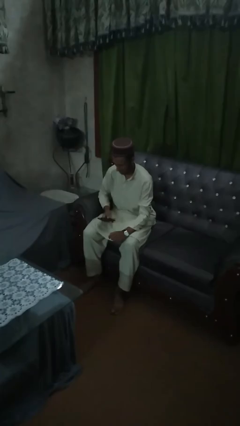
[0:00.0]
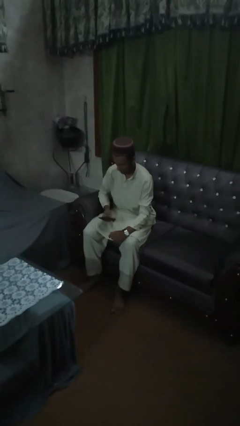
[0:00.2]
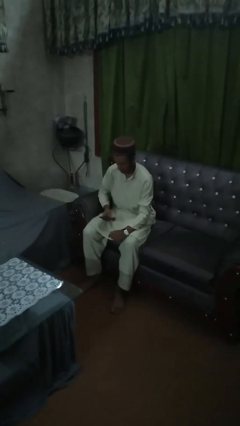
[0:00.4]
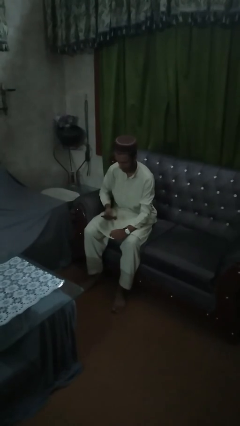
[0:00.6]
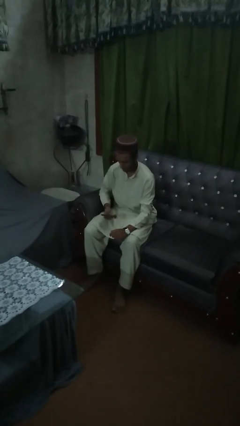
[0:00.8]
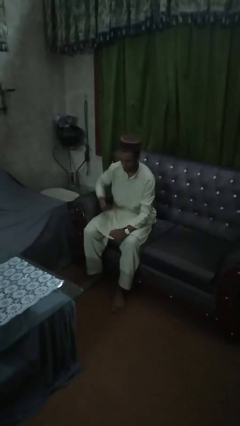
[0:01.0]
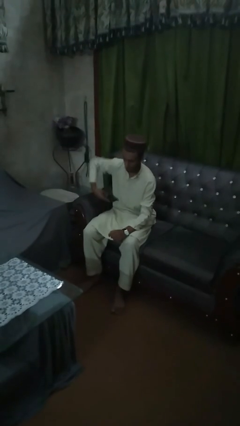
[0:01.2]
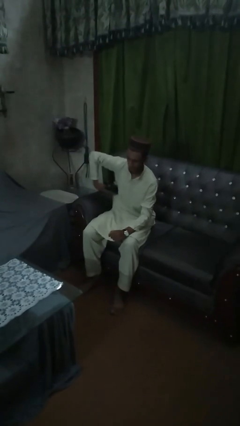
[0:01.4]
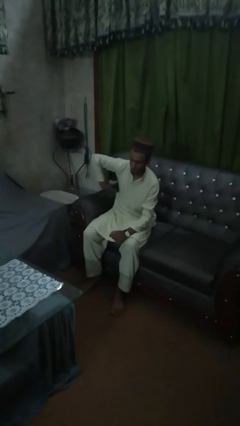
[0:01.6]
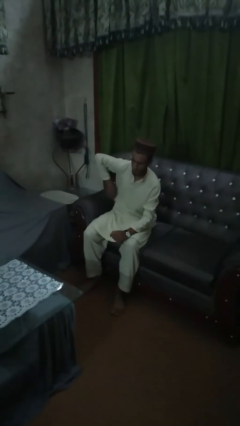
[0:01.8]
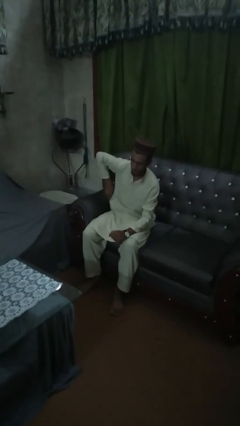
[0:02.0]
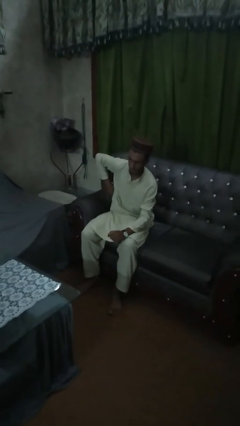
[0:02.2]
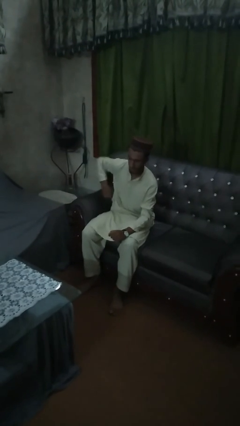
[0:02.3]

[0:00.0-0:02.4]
person puts phone into pocket

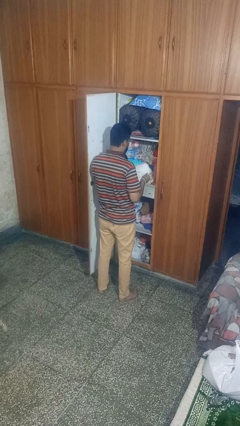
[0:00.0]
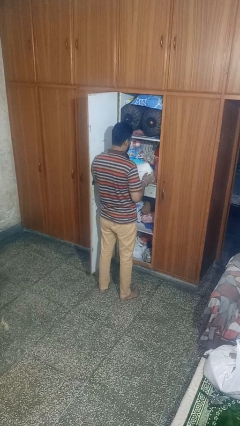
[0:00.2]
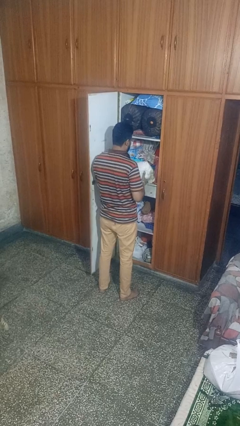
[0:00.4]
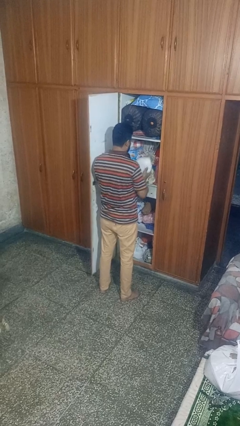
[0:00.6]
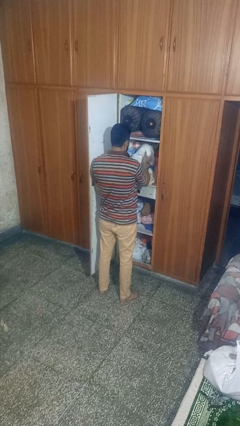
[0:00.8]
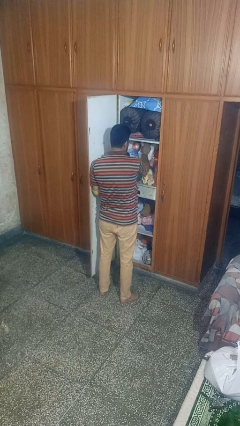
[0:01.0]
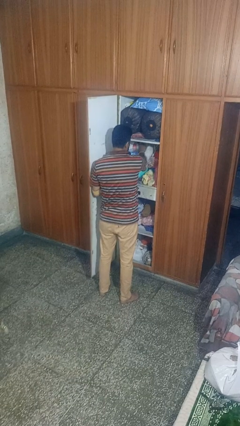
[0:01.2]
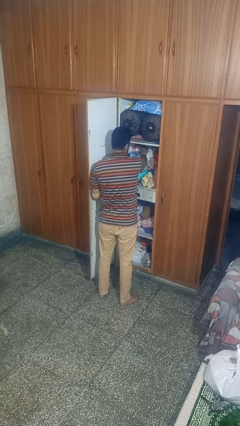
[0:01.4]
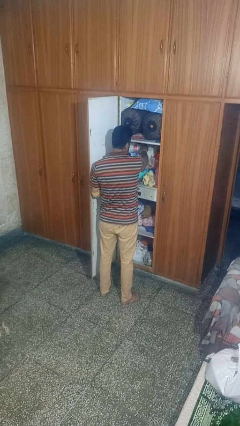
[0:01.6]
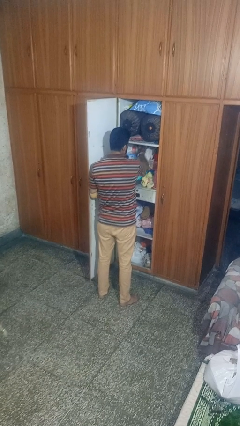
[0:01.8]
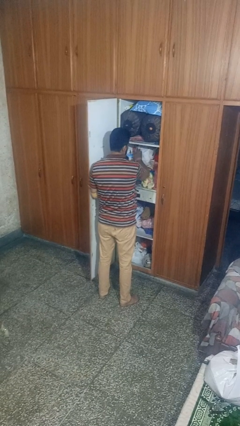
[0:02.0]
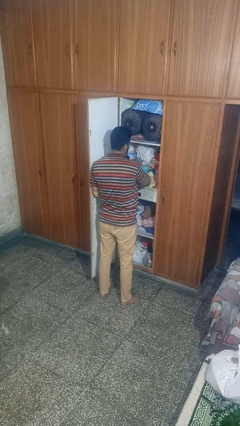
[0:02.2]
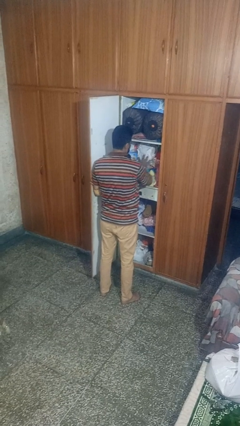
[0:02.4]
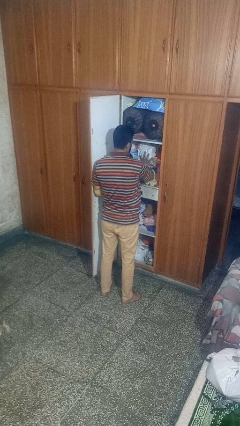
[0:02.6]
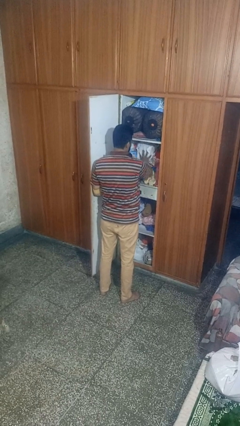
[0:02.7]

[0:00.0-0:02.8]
person puts down object into cabinet

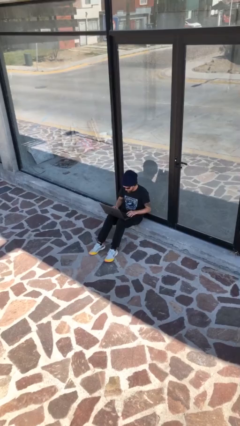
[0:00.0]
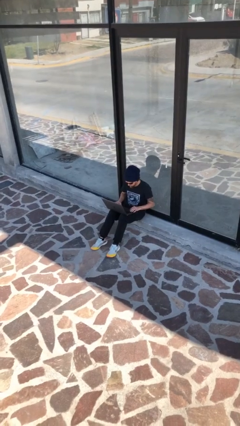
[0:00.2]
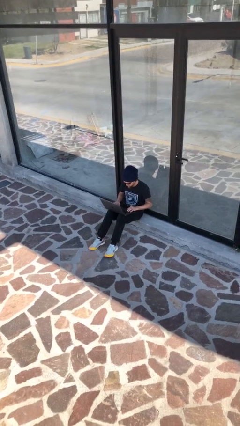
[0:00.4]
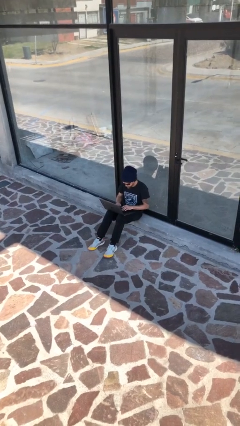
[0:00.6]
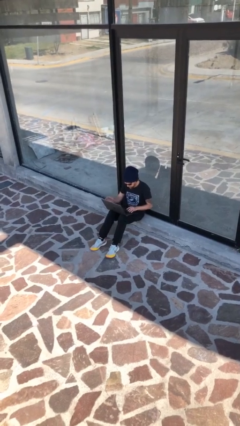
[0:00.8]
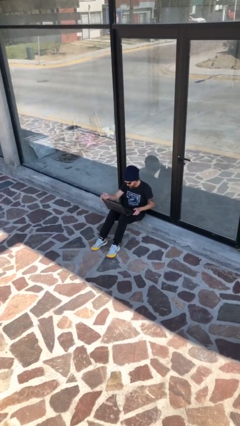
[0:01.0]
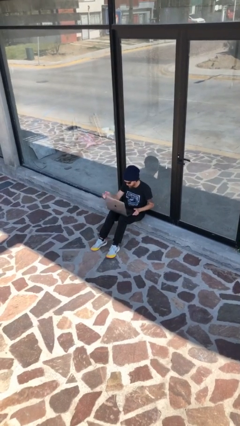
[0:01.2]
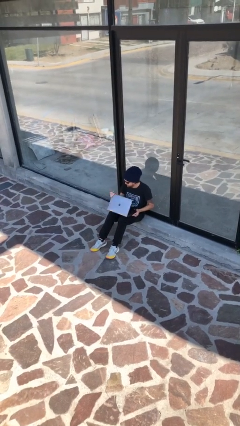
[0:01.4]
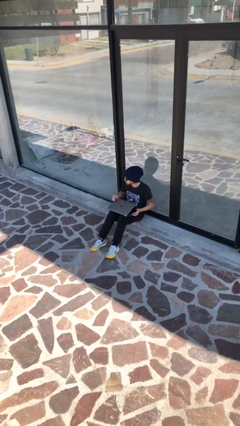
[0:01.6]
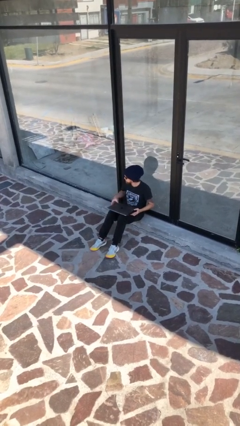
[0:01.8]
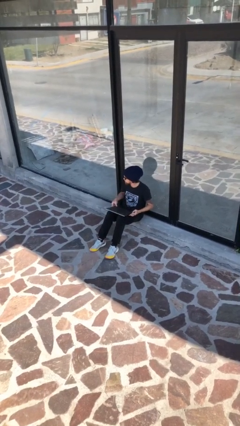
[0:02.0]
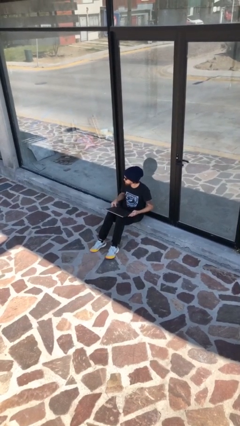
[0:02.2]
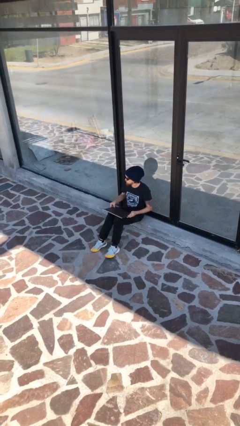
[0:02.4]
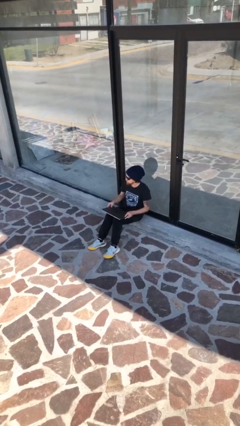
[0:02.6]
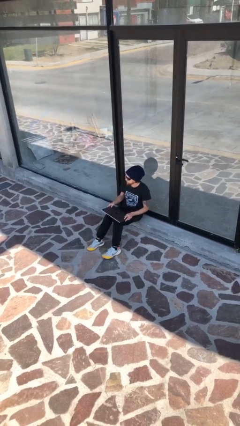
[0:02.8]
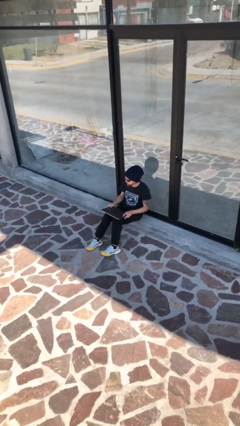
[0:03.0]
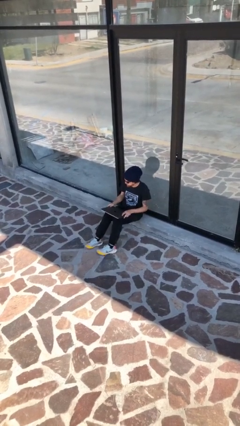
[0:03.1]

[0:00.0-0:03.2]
person interacts with laptop

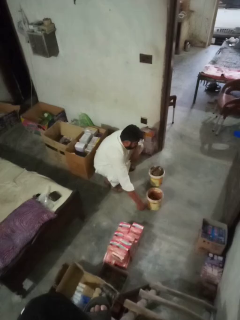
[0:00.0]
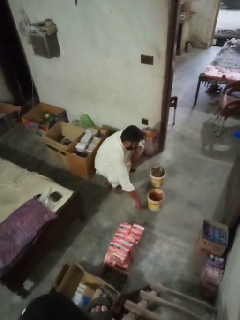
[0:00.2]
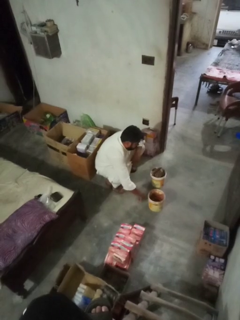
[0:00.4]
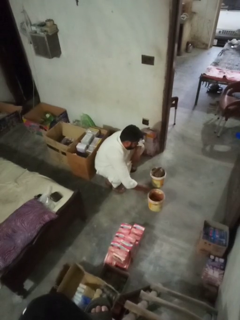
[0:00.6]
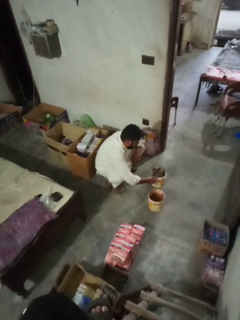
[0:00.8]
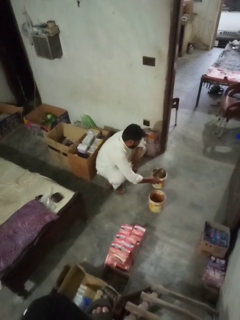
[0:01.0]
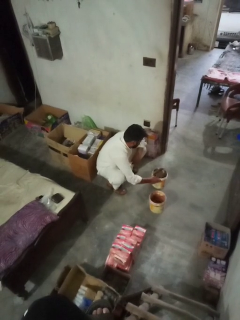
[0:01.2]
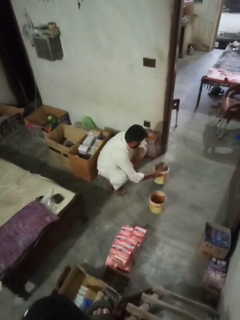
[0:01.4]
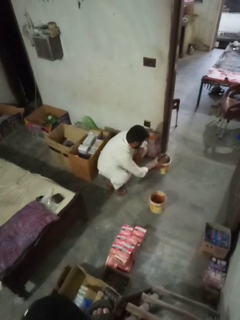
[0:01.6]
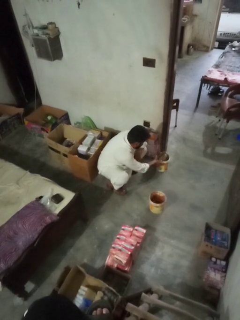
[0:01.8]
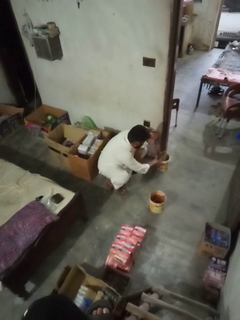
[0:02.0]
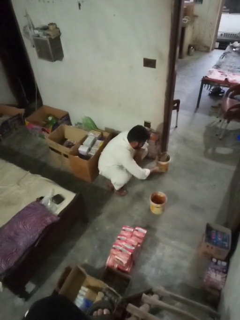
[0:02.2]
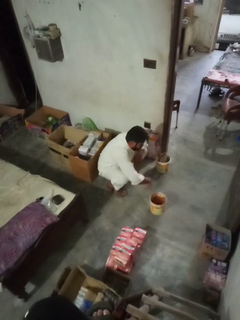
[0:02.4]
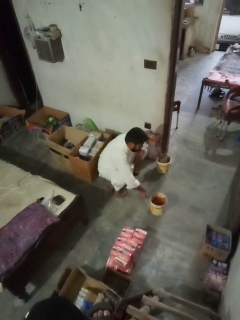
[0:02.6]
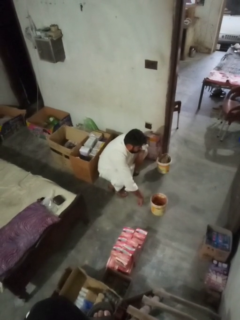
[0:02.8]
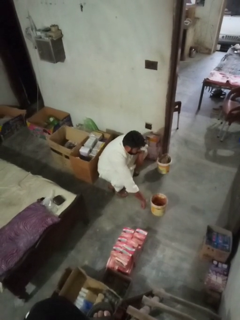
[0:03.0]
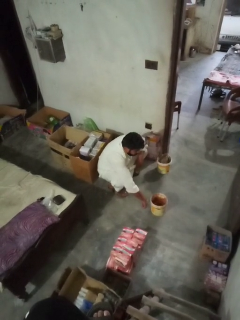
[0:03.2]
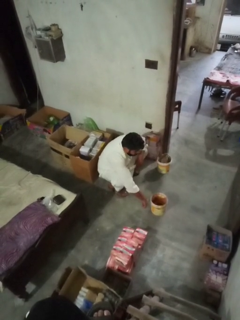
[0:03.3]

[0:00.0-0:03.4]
person inserts trashbag into trashcan

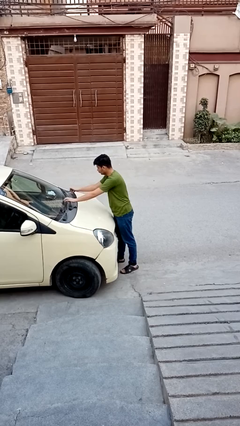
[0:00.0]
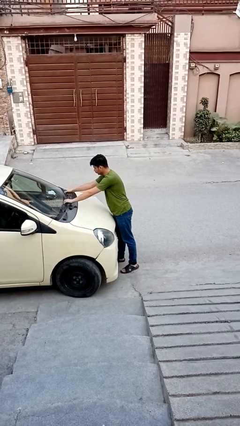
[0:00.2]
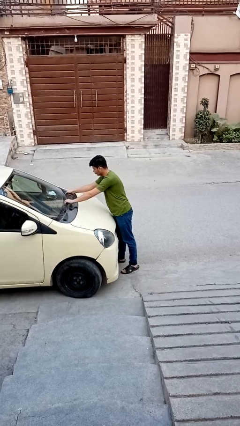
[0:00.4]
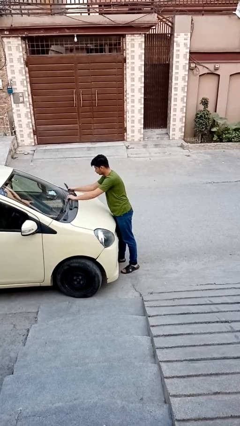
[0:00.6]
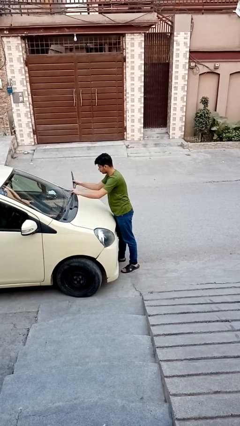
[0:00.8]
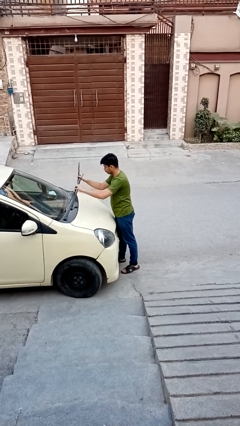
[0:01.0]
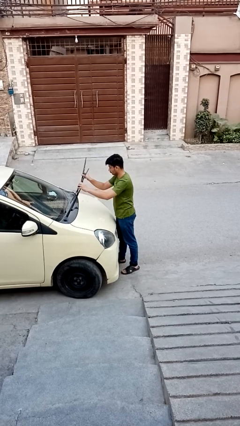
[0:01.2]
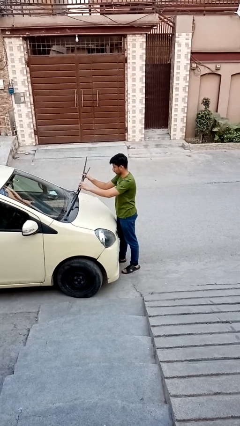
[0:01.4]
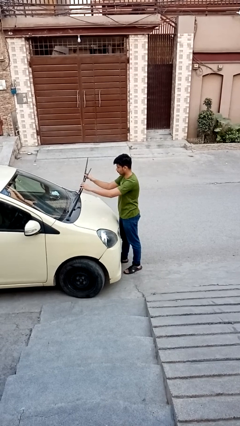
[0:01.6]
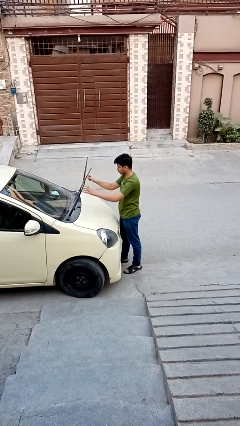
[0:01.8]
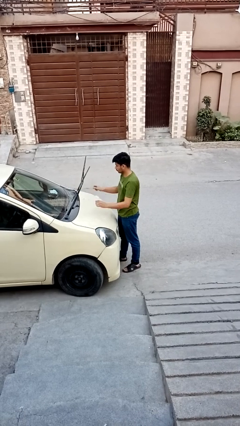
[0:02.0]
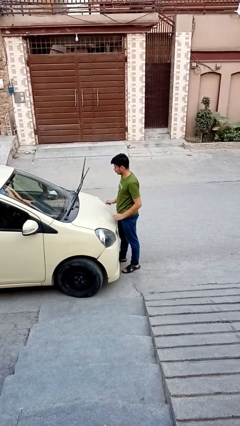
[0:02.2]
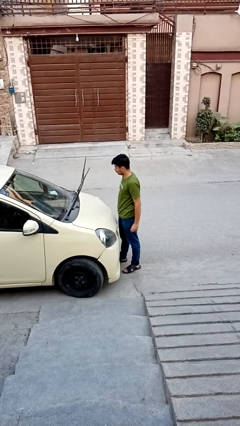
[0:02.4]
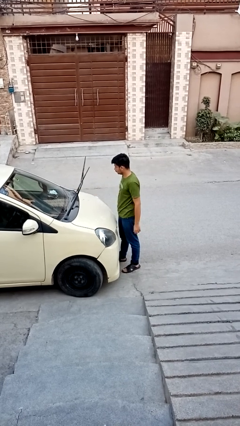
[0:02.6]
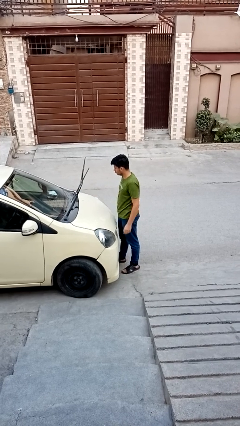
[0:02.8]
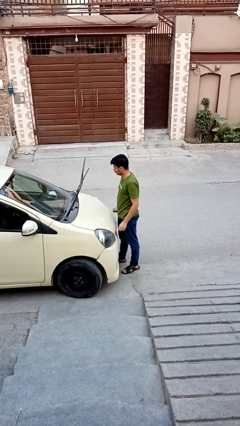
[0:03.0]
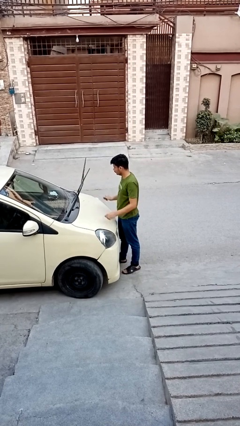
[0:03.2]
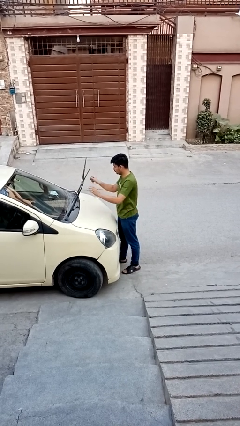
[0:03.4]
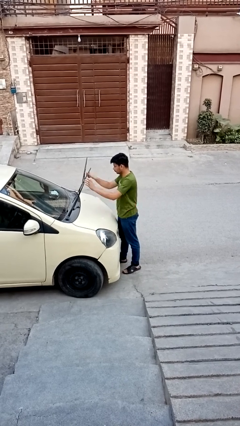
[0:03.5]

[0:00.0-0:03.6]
person flips up car wipers

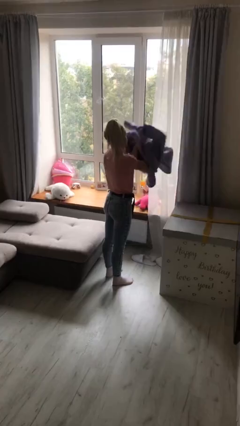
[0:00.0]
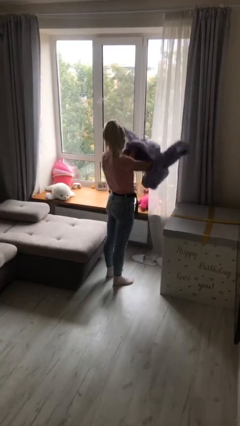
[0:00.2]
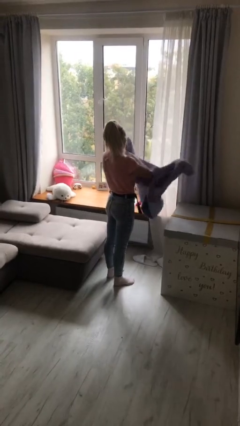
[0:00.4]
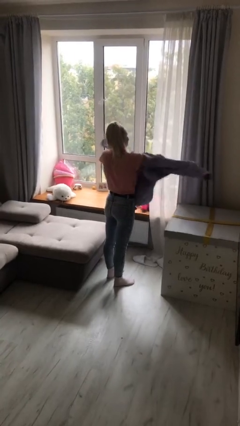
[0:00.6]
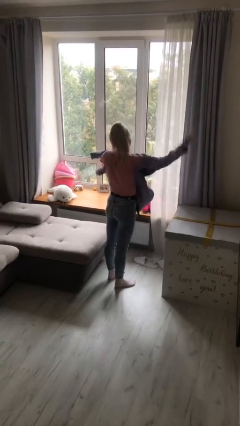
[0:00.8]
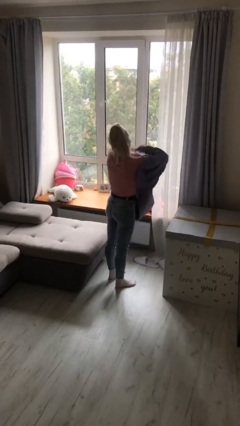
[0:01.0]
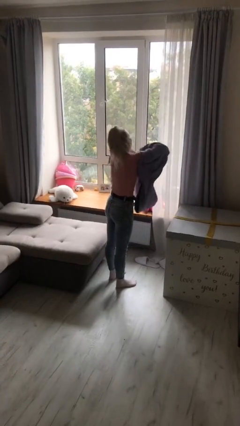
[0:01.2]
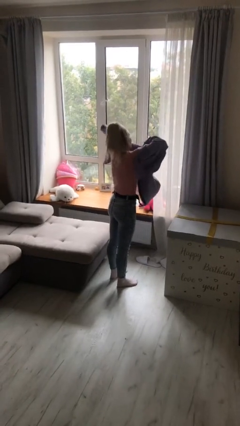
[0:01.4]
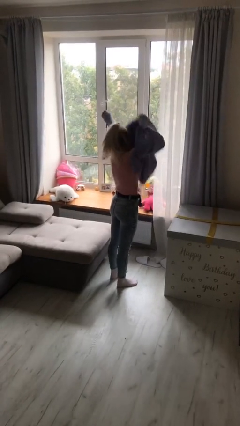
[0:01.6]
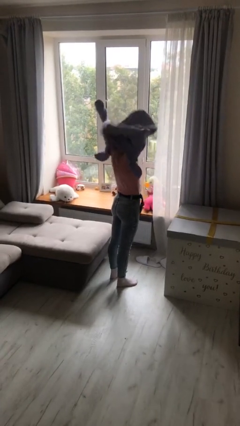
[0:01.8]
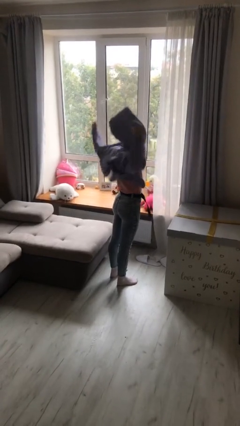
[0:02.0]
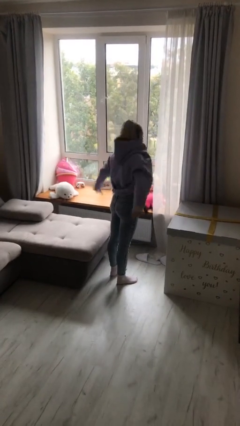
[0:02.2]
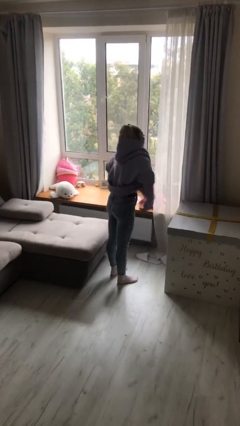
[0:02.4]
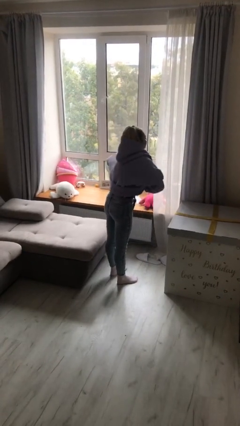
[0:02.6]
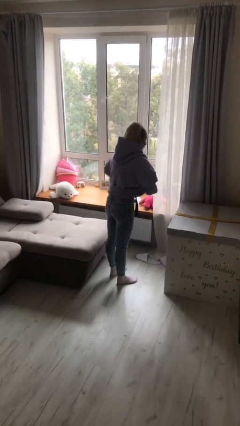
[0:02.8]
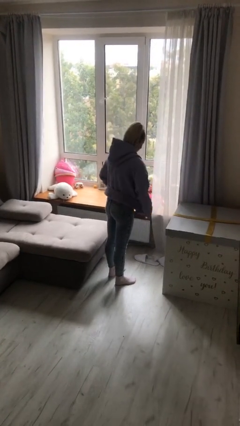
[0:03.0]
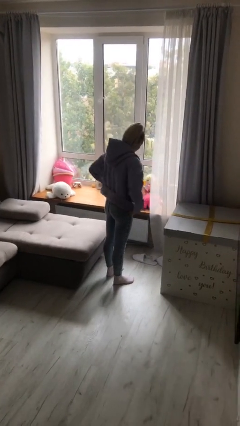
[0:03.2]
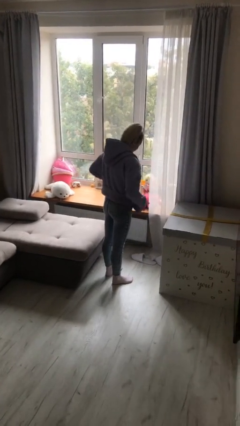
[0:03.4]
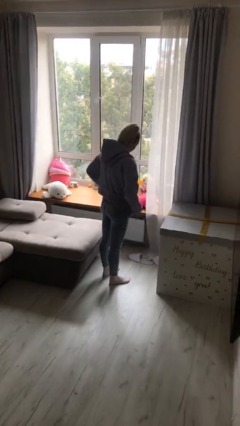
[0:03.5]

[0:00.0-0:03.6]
person puts on hoodie
